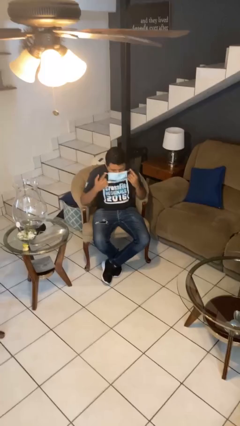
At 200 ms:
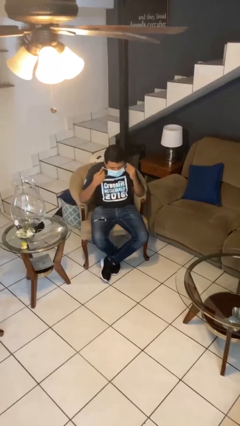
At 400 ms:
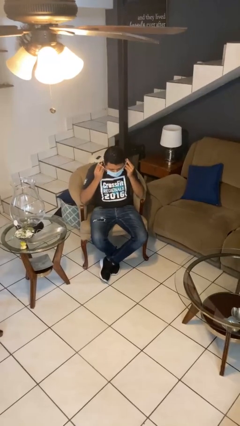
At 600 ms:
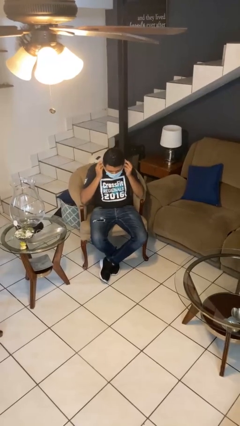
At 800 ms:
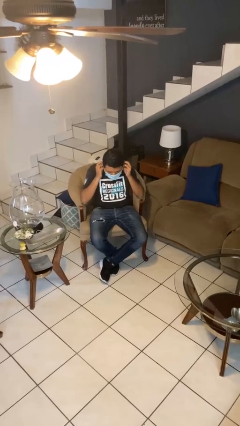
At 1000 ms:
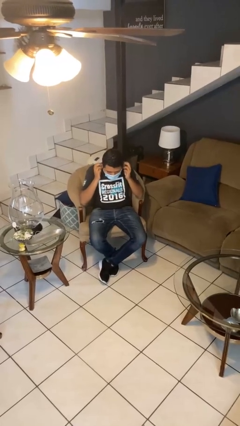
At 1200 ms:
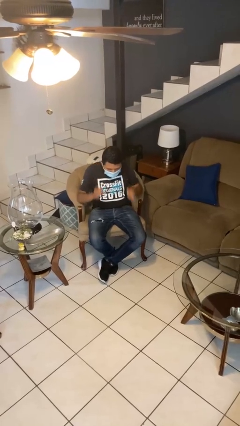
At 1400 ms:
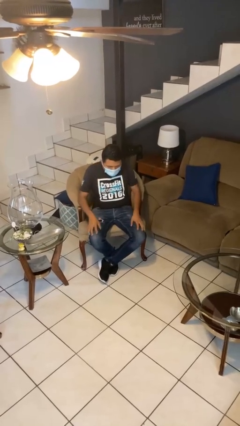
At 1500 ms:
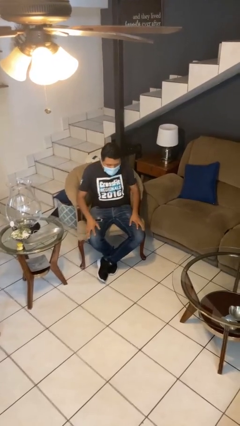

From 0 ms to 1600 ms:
person puts on facemask

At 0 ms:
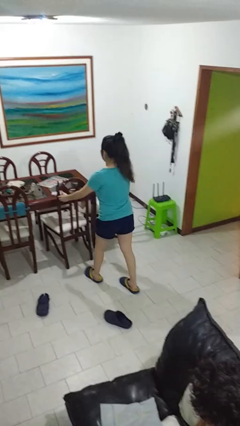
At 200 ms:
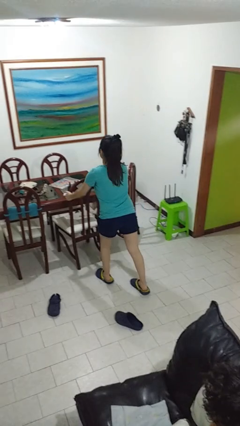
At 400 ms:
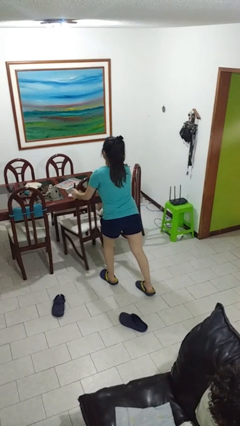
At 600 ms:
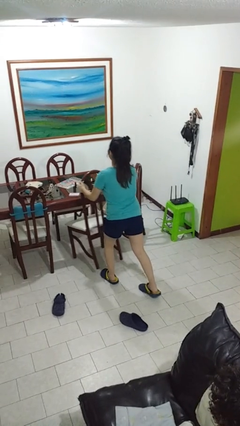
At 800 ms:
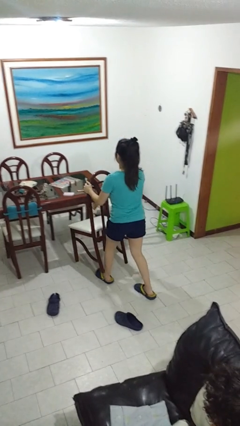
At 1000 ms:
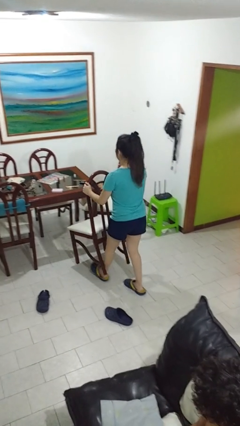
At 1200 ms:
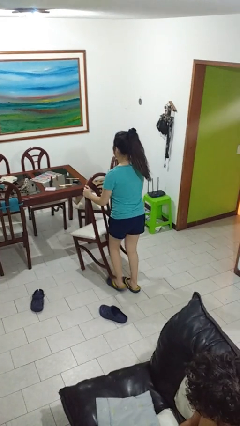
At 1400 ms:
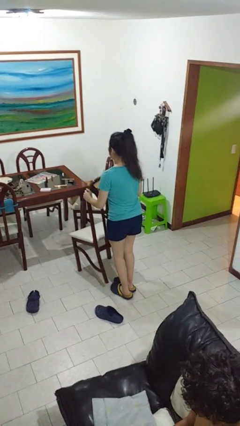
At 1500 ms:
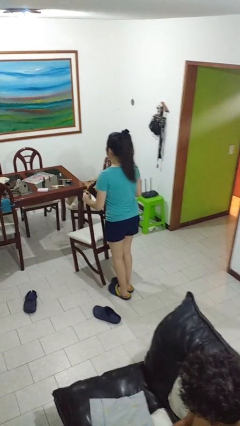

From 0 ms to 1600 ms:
person pulls out chair

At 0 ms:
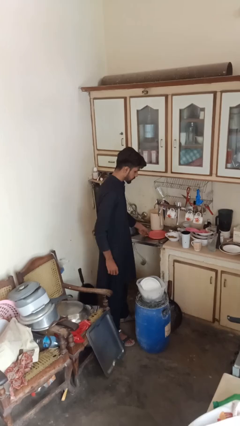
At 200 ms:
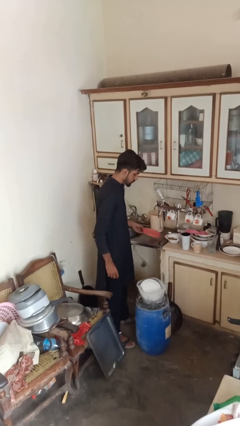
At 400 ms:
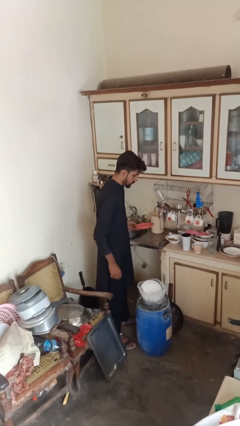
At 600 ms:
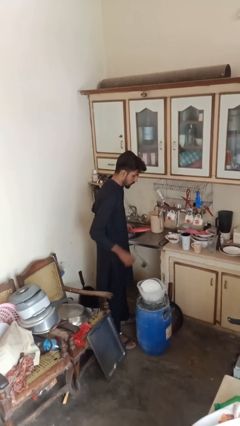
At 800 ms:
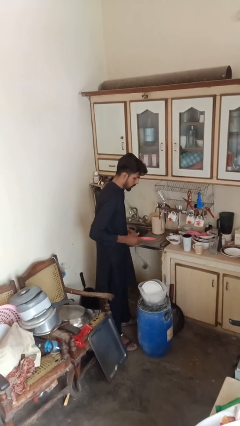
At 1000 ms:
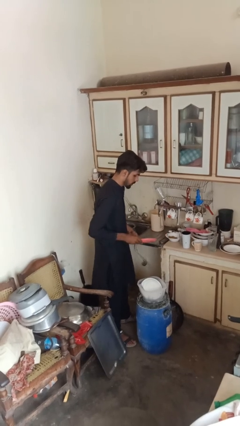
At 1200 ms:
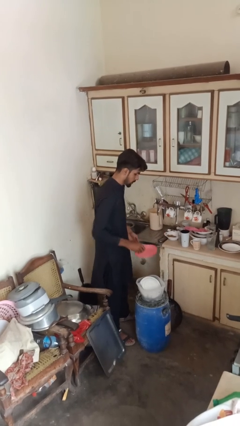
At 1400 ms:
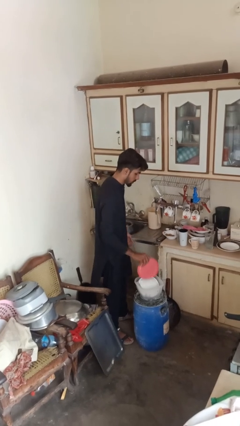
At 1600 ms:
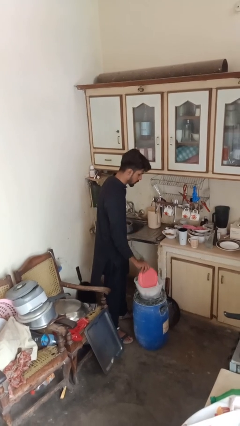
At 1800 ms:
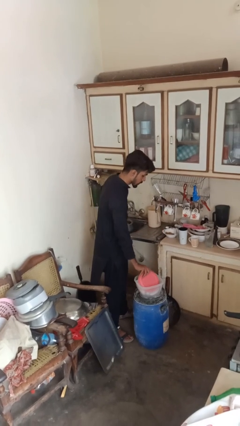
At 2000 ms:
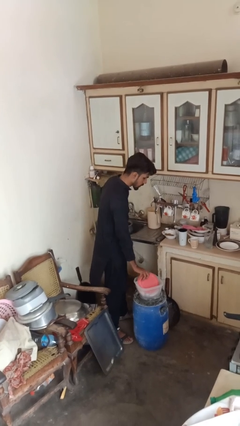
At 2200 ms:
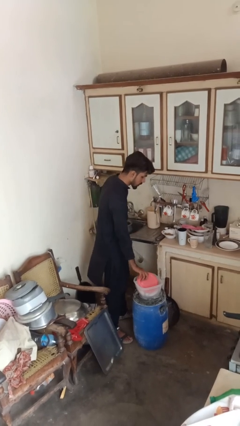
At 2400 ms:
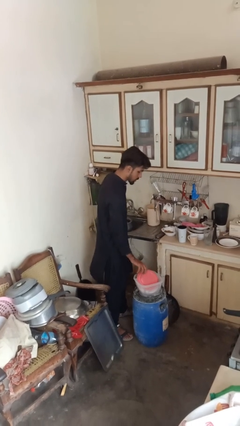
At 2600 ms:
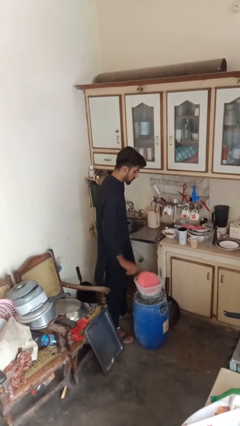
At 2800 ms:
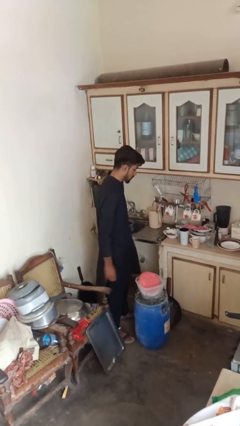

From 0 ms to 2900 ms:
person loads dishwasher

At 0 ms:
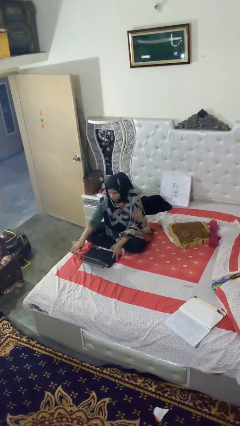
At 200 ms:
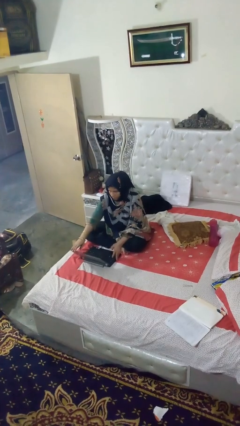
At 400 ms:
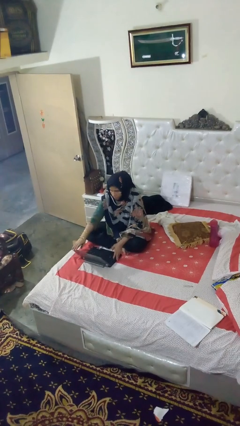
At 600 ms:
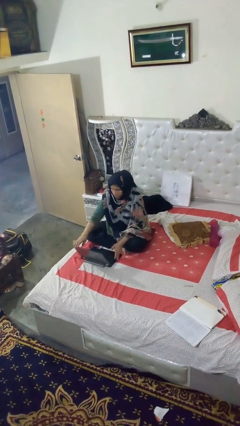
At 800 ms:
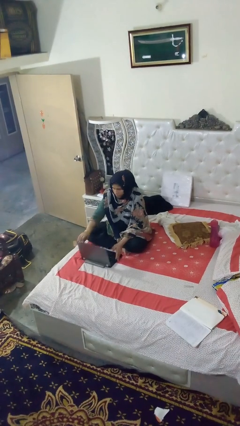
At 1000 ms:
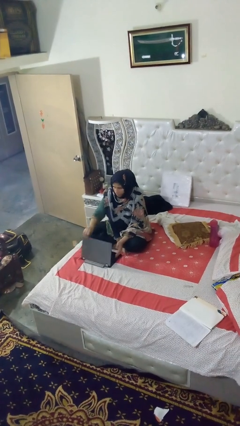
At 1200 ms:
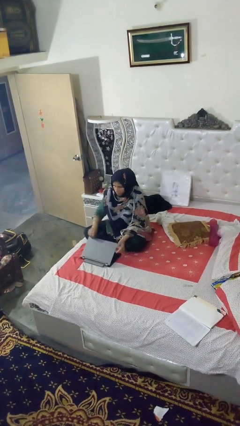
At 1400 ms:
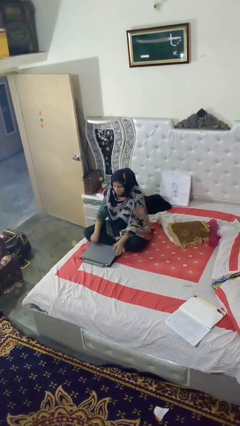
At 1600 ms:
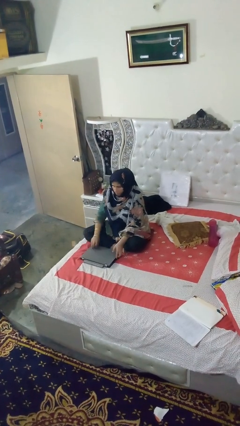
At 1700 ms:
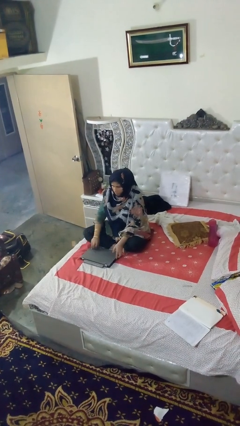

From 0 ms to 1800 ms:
person closes laptop

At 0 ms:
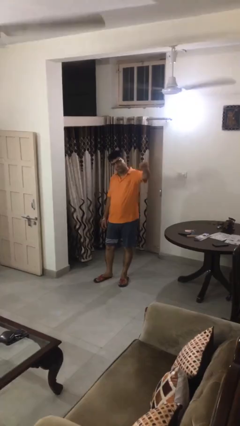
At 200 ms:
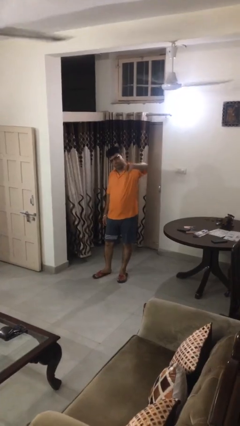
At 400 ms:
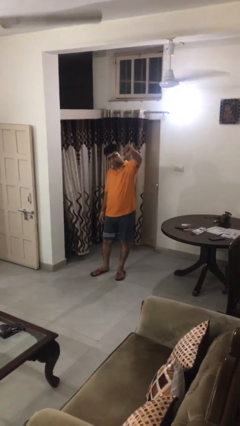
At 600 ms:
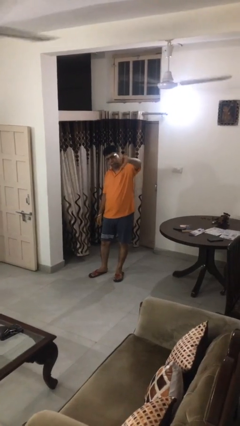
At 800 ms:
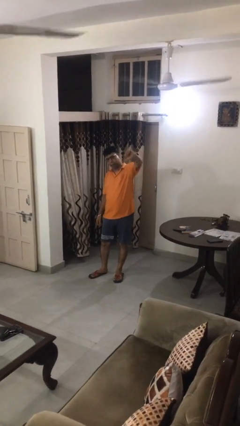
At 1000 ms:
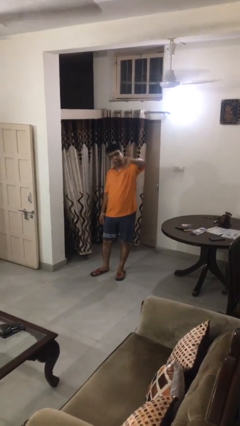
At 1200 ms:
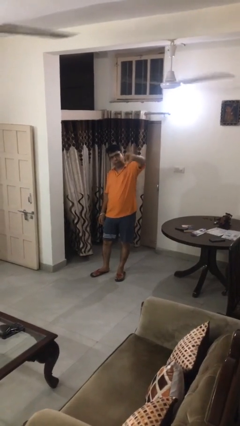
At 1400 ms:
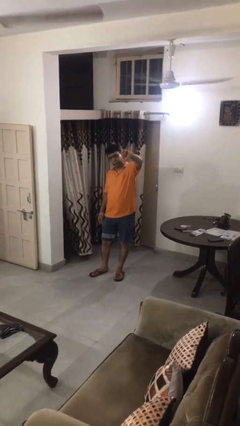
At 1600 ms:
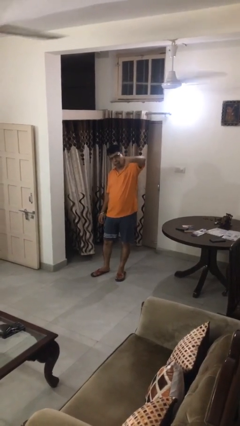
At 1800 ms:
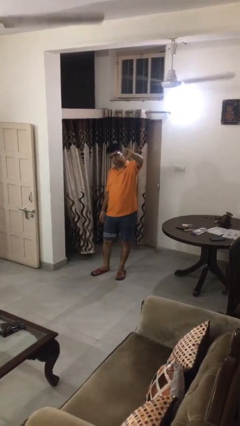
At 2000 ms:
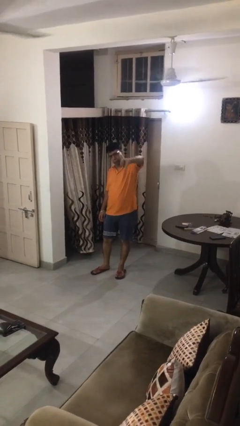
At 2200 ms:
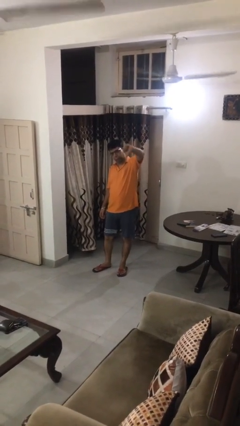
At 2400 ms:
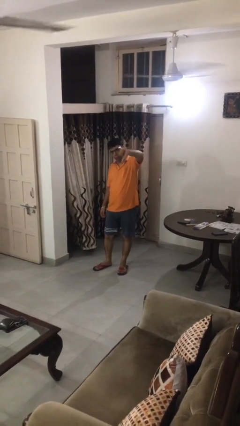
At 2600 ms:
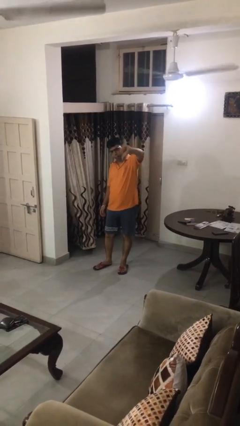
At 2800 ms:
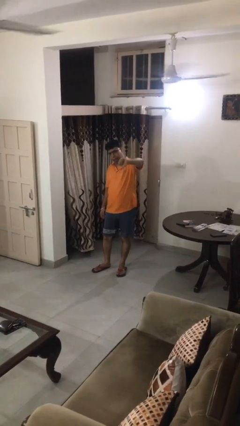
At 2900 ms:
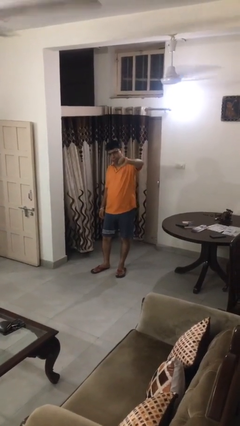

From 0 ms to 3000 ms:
person gestures thumbs down

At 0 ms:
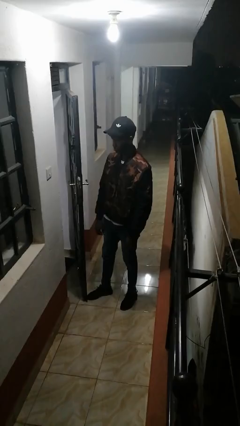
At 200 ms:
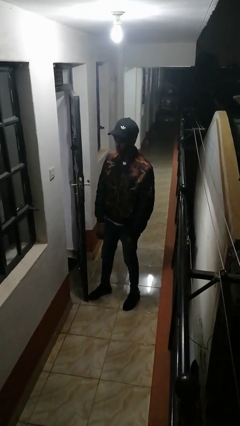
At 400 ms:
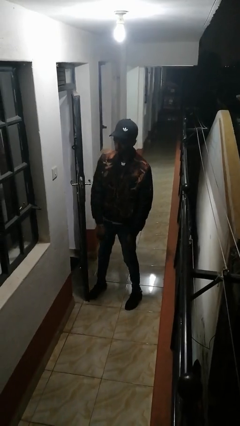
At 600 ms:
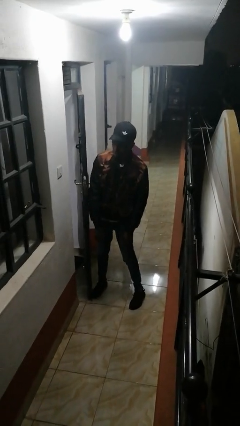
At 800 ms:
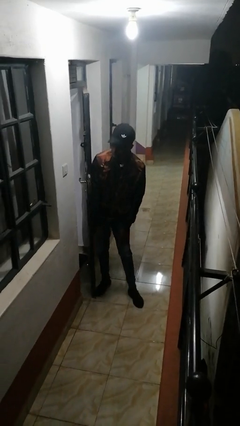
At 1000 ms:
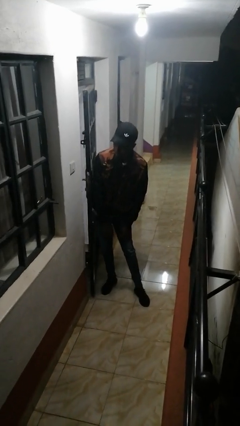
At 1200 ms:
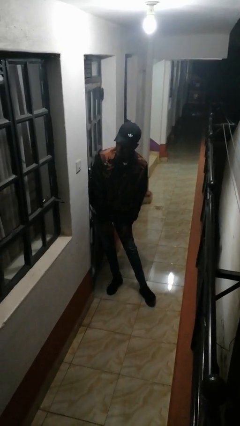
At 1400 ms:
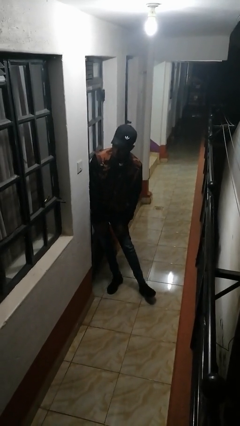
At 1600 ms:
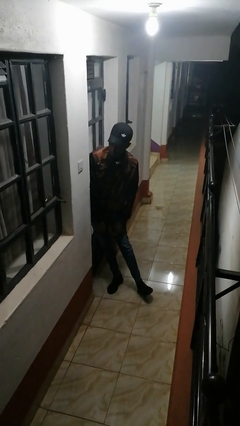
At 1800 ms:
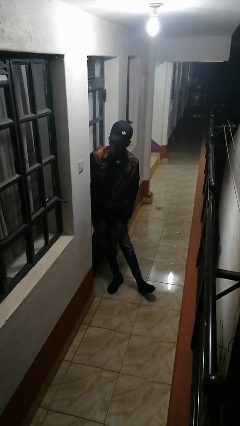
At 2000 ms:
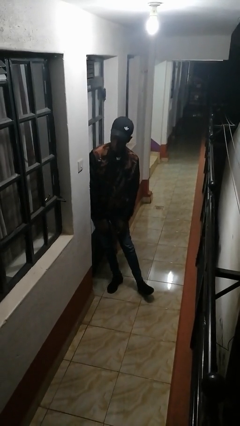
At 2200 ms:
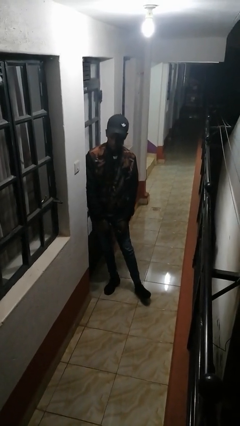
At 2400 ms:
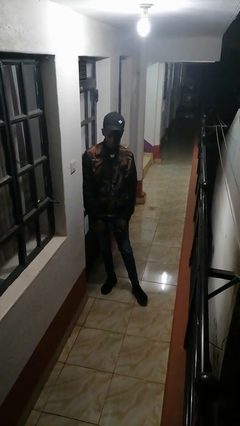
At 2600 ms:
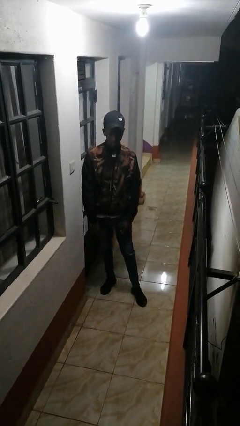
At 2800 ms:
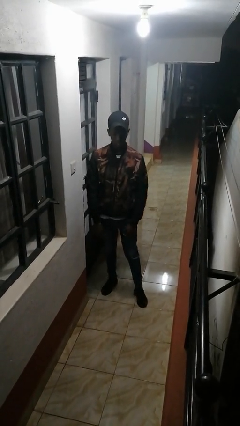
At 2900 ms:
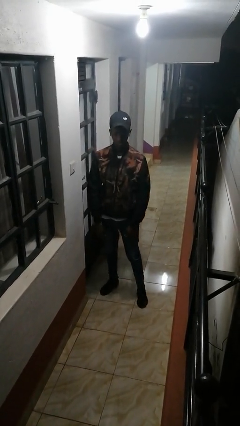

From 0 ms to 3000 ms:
person closes door with hip

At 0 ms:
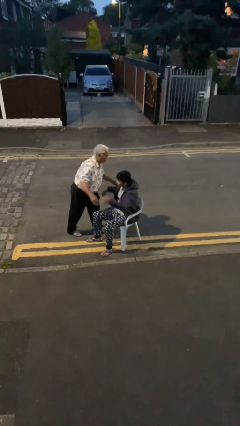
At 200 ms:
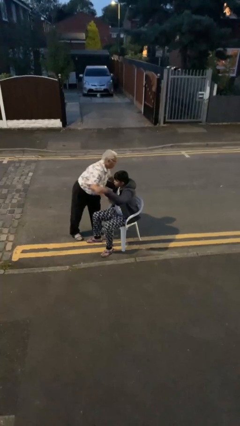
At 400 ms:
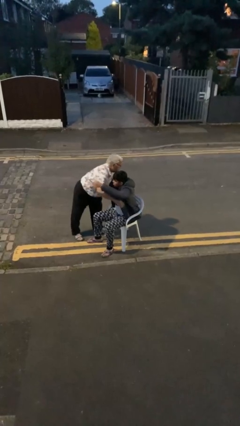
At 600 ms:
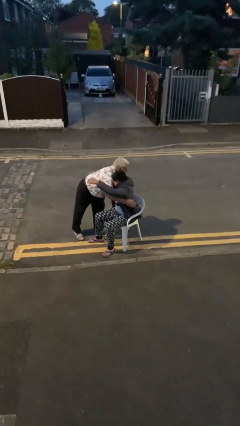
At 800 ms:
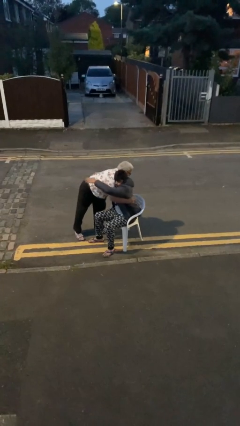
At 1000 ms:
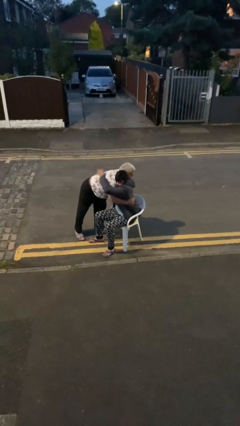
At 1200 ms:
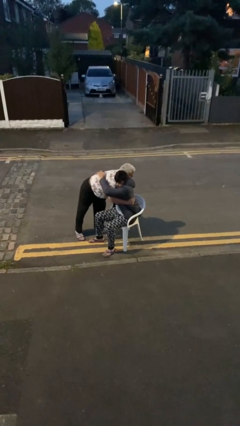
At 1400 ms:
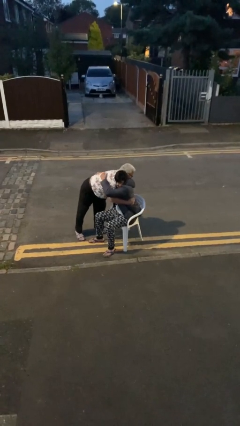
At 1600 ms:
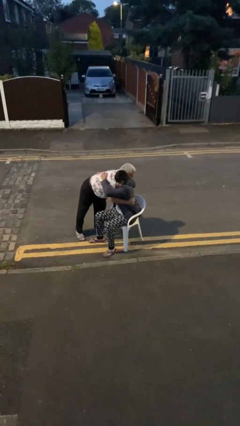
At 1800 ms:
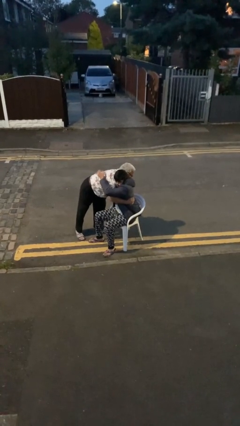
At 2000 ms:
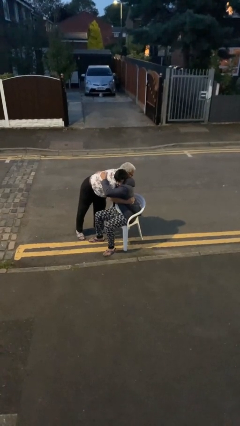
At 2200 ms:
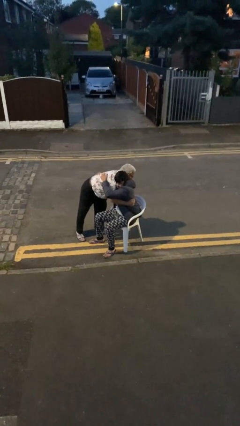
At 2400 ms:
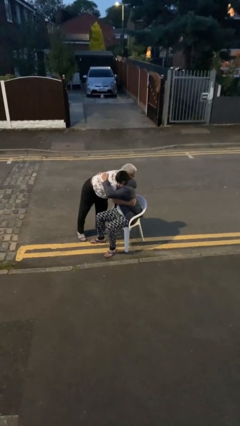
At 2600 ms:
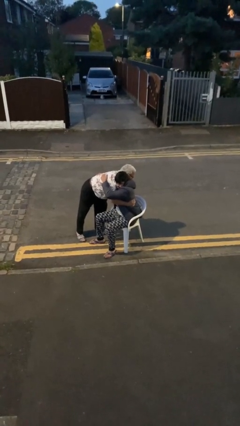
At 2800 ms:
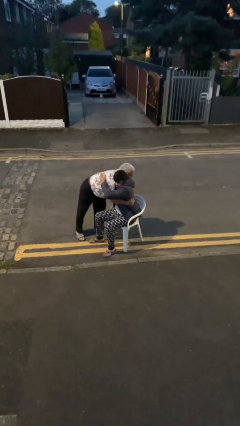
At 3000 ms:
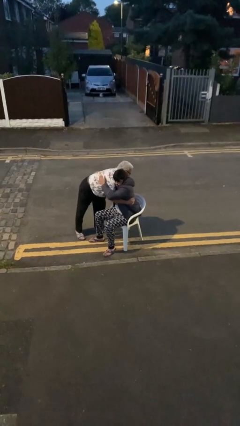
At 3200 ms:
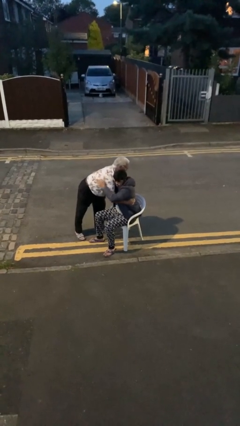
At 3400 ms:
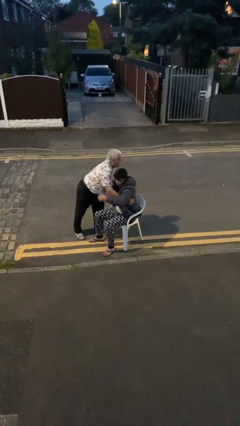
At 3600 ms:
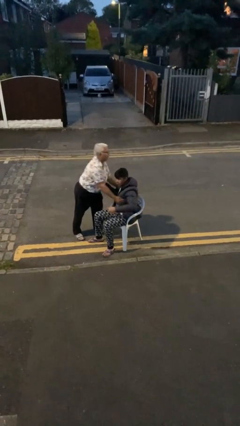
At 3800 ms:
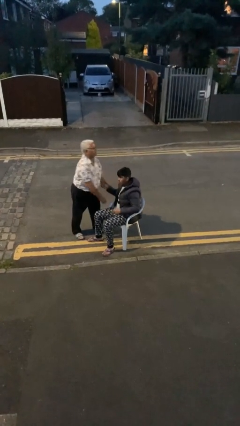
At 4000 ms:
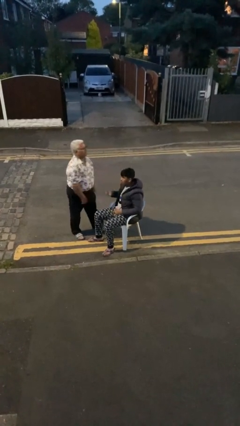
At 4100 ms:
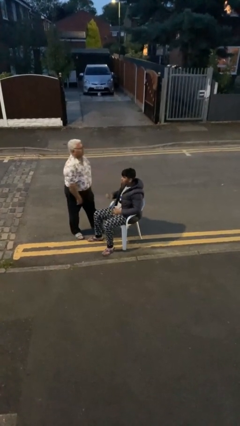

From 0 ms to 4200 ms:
person embraces person
